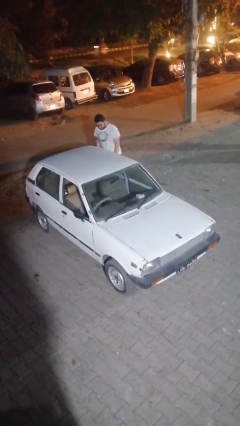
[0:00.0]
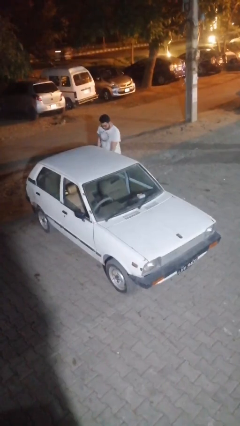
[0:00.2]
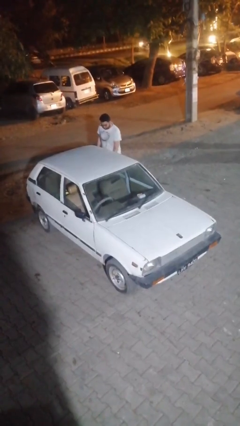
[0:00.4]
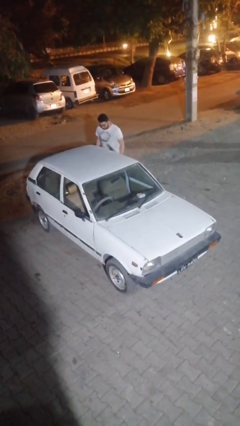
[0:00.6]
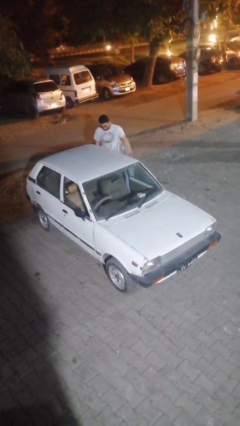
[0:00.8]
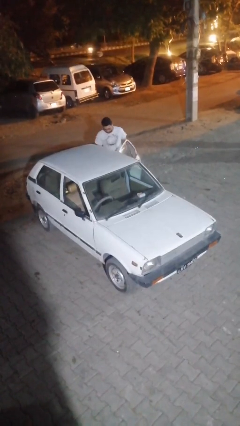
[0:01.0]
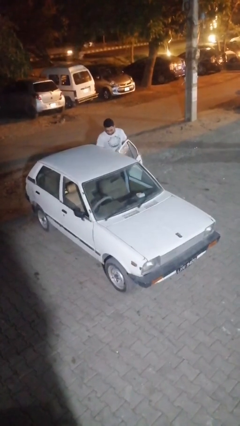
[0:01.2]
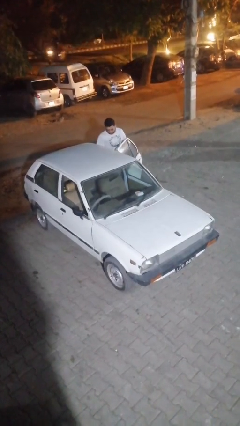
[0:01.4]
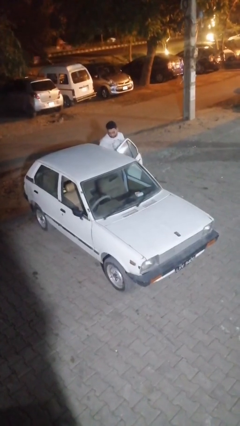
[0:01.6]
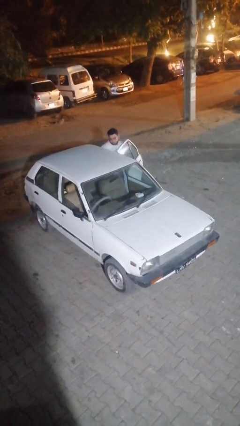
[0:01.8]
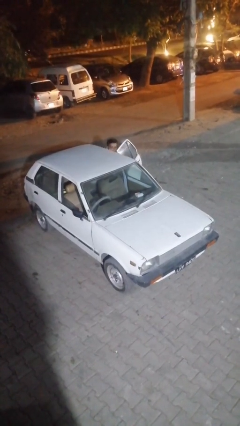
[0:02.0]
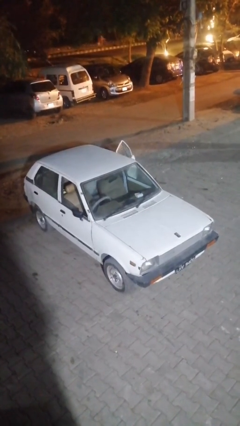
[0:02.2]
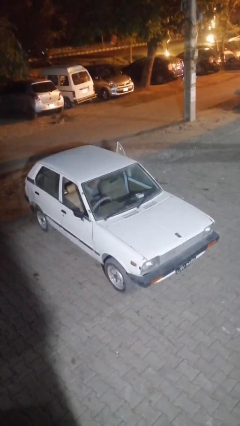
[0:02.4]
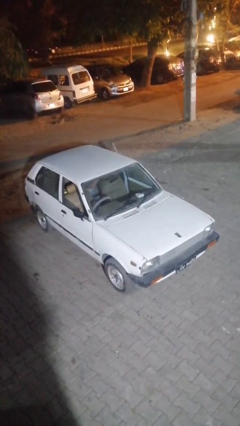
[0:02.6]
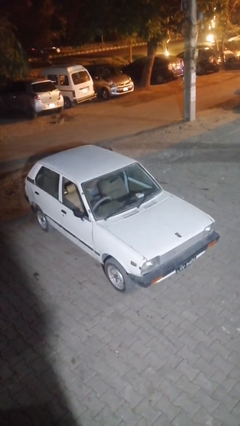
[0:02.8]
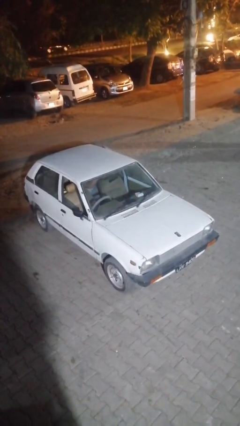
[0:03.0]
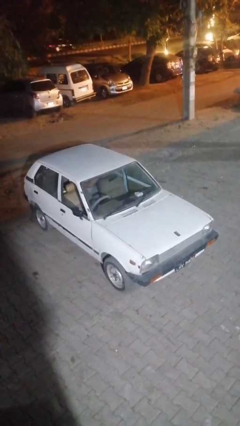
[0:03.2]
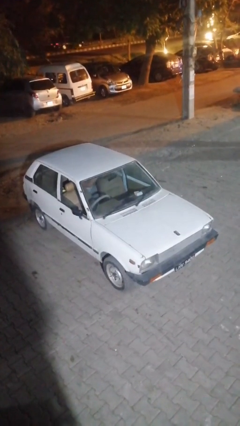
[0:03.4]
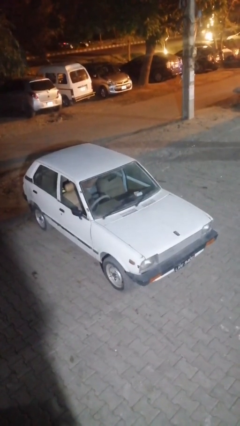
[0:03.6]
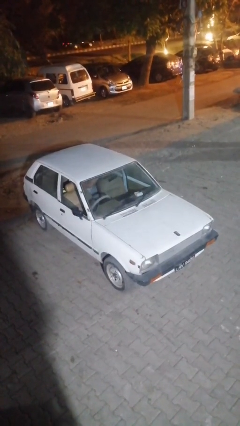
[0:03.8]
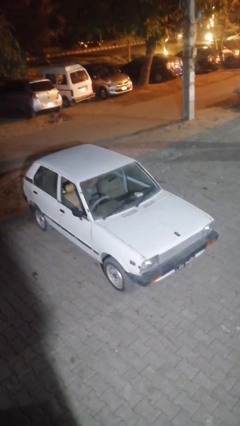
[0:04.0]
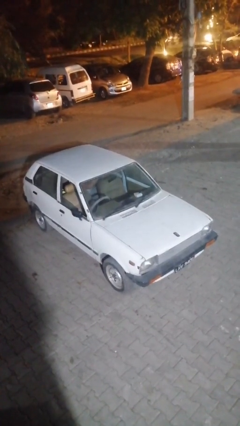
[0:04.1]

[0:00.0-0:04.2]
car picks up person

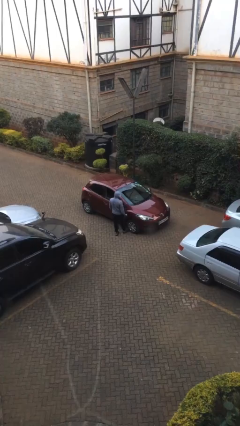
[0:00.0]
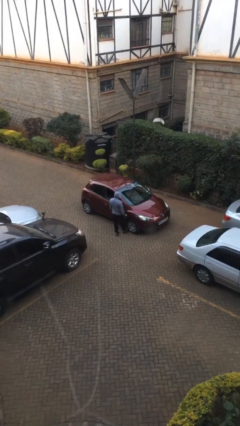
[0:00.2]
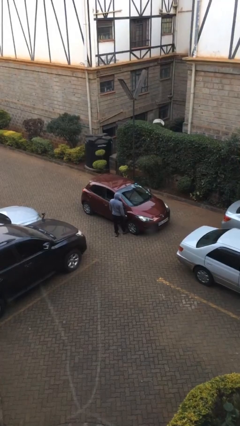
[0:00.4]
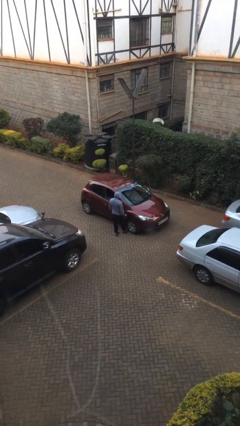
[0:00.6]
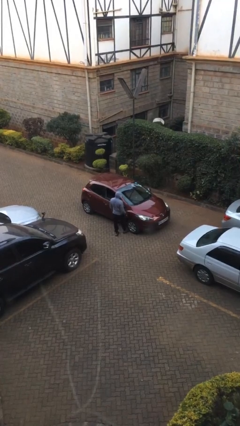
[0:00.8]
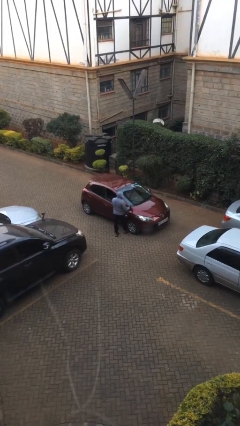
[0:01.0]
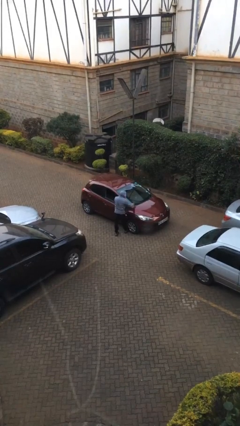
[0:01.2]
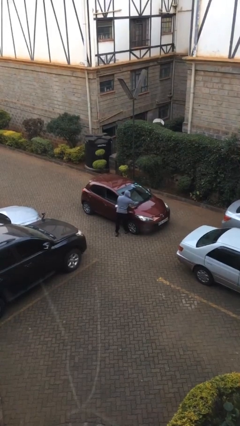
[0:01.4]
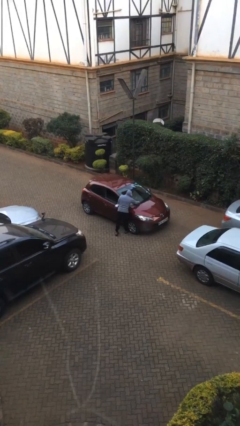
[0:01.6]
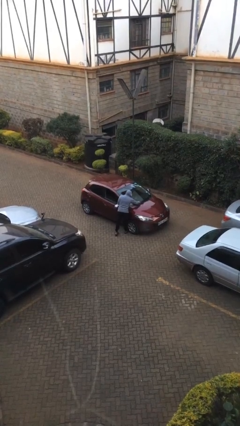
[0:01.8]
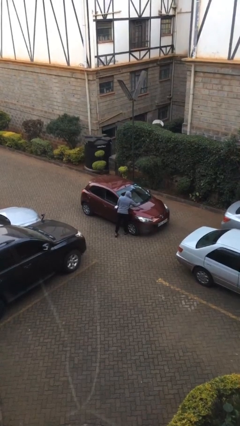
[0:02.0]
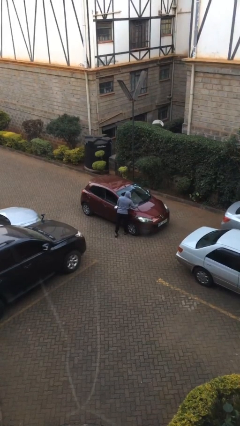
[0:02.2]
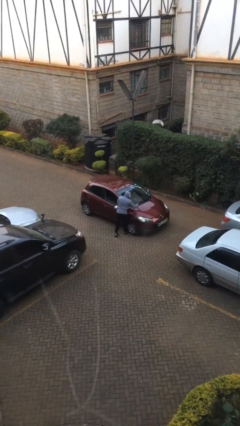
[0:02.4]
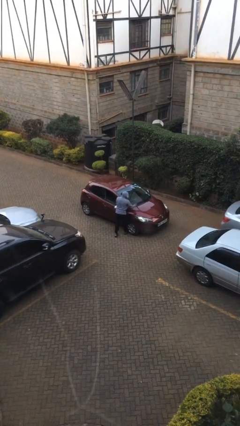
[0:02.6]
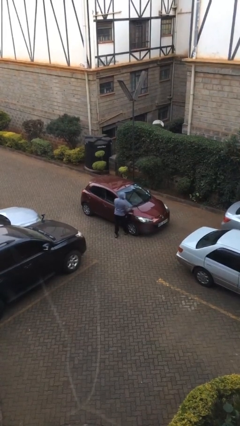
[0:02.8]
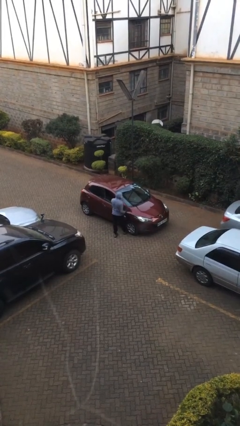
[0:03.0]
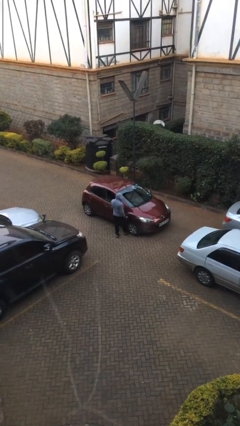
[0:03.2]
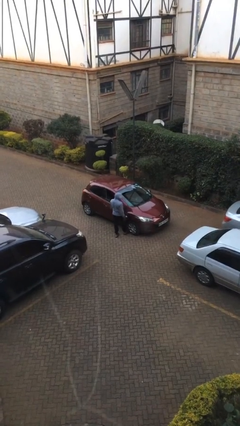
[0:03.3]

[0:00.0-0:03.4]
person flips up car wipers

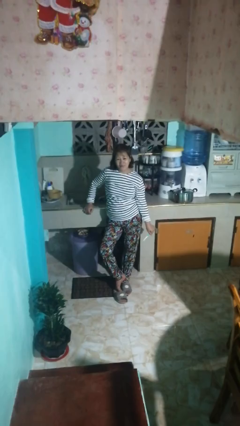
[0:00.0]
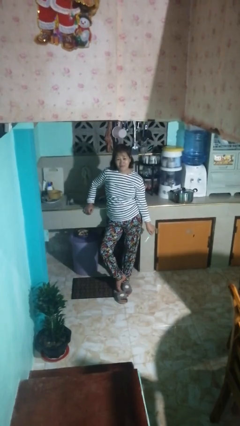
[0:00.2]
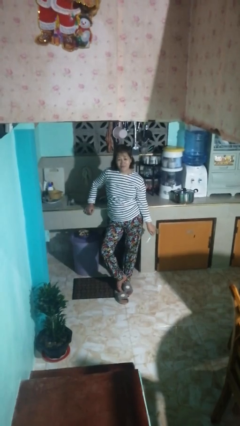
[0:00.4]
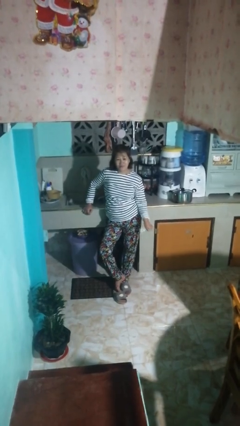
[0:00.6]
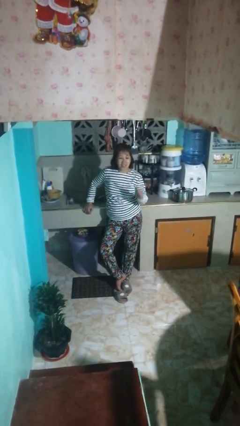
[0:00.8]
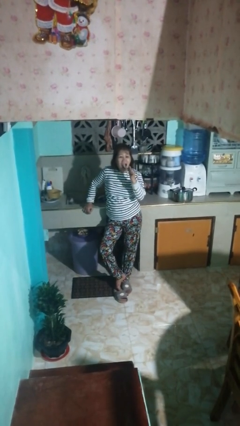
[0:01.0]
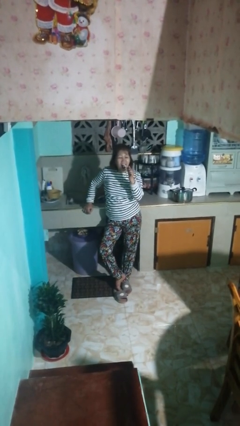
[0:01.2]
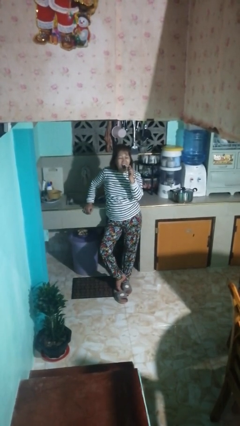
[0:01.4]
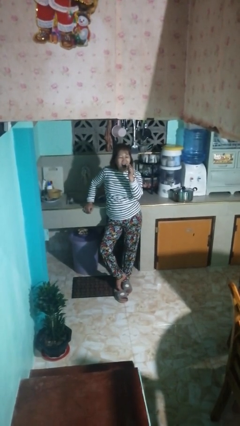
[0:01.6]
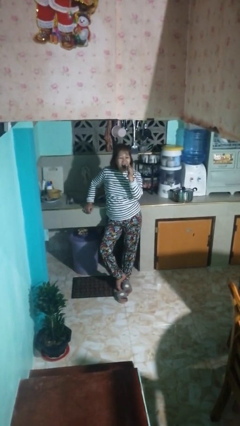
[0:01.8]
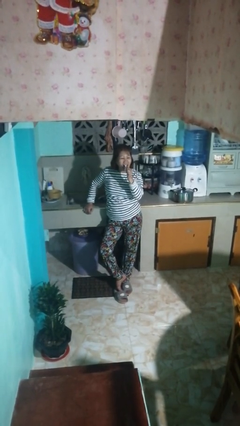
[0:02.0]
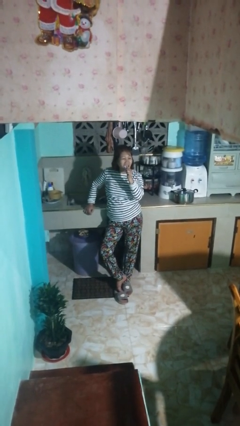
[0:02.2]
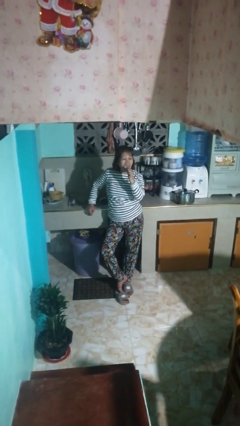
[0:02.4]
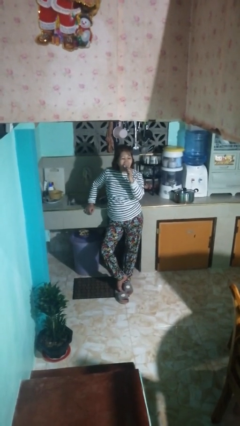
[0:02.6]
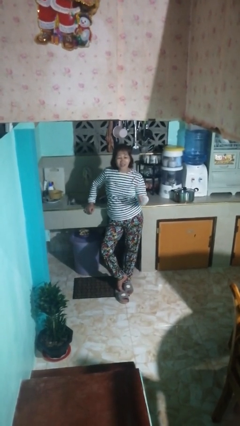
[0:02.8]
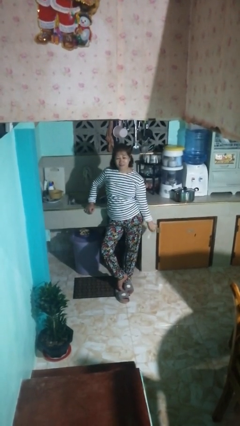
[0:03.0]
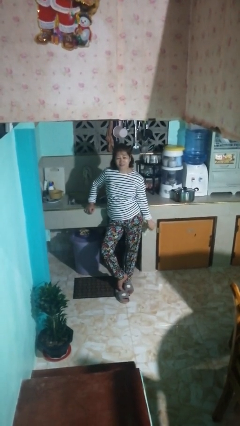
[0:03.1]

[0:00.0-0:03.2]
person brushes teeth

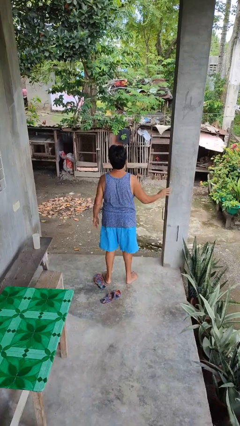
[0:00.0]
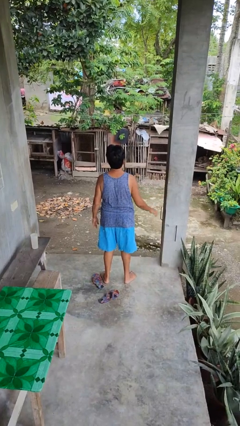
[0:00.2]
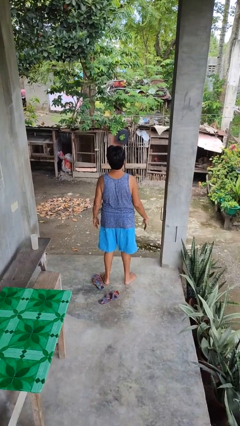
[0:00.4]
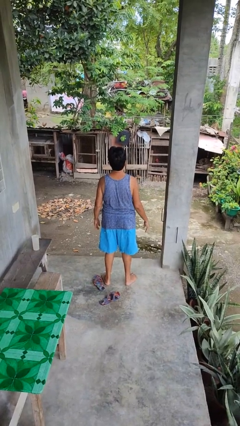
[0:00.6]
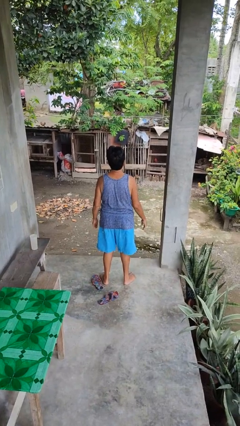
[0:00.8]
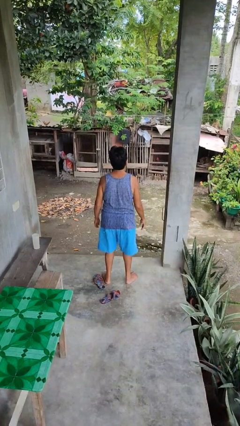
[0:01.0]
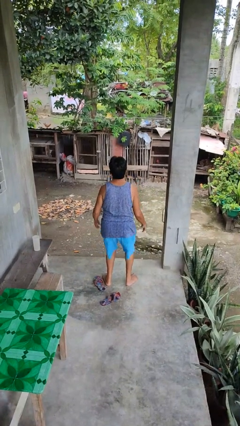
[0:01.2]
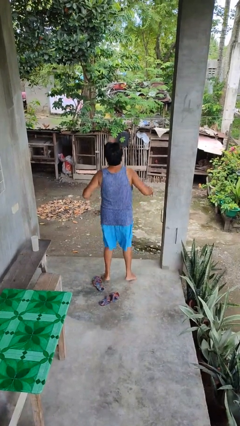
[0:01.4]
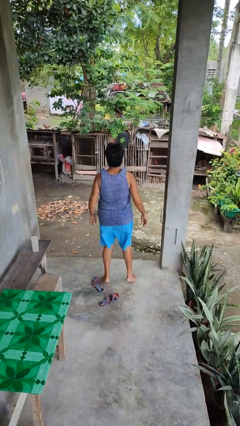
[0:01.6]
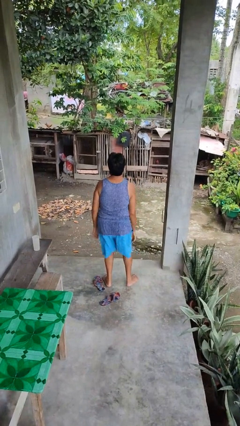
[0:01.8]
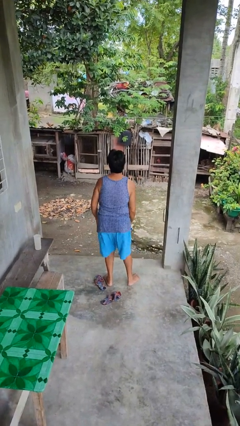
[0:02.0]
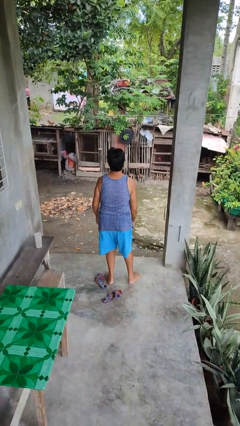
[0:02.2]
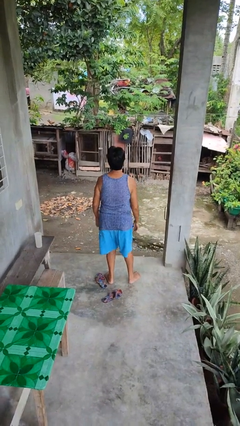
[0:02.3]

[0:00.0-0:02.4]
person jumps

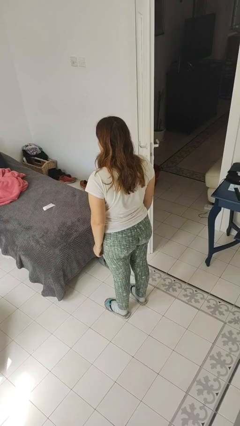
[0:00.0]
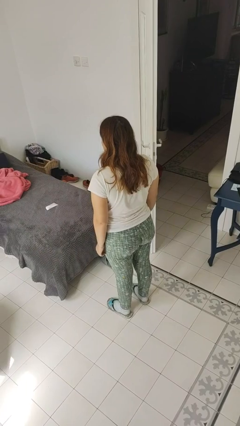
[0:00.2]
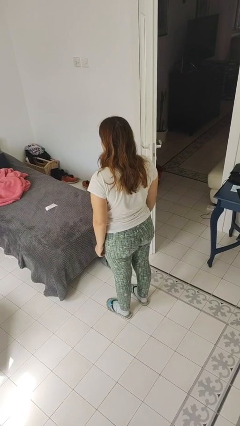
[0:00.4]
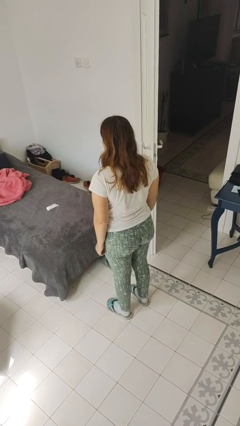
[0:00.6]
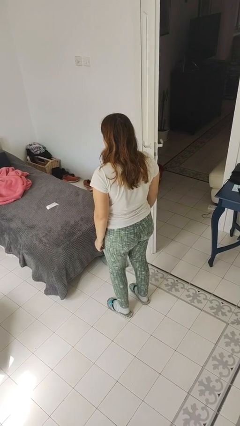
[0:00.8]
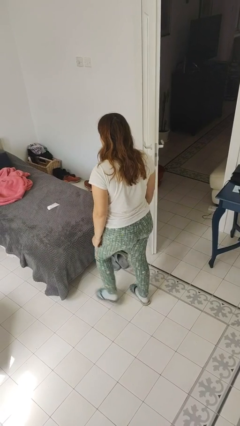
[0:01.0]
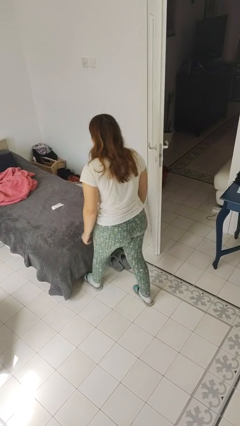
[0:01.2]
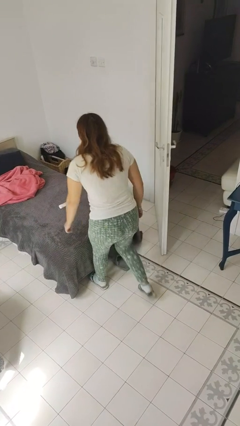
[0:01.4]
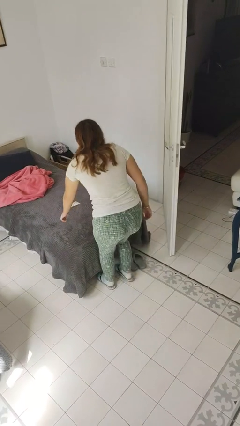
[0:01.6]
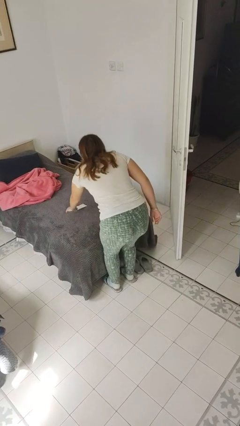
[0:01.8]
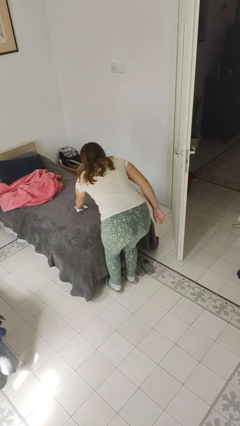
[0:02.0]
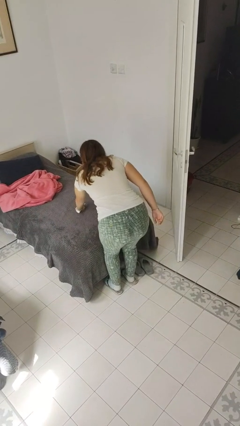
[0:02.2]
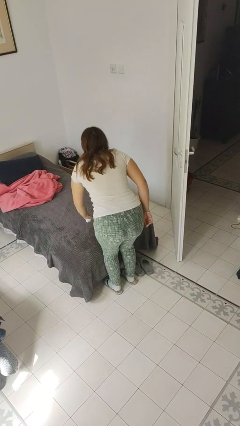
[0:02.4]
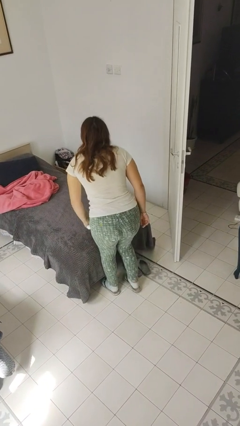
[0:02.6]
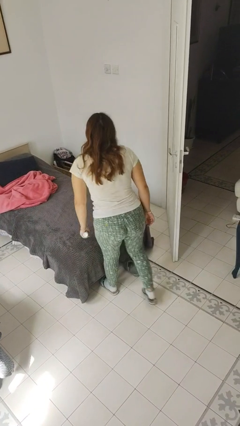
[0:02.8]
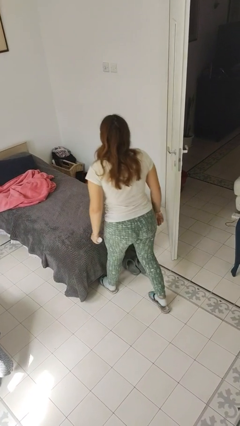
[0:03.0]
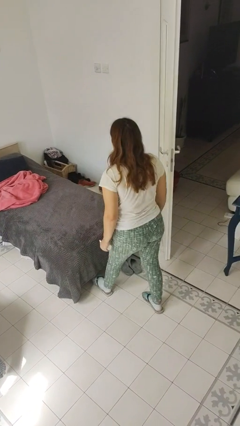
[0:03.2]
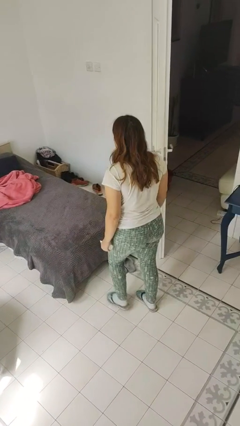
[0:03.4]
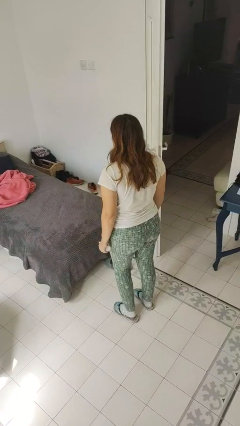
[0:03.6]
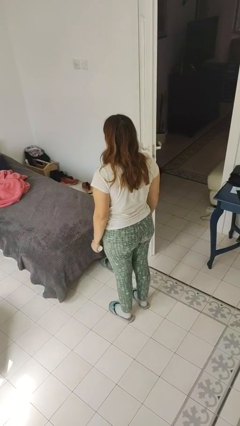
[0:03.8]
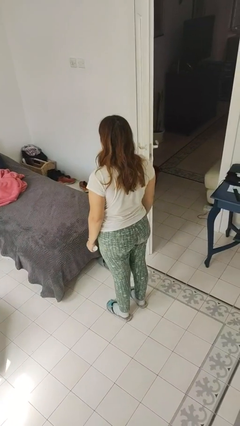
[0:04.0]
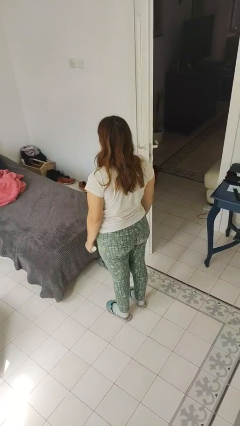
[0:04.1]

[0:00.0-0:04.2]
person picks up object from bed
